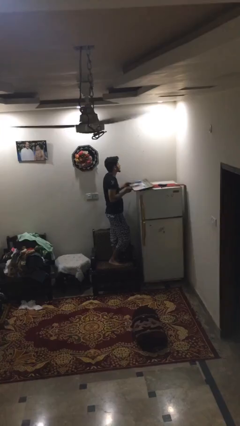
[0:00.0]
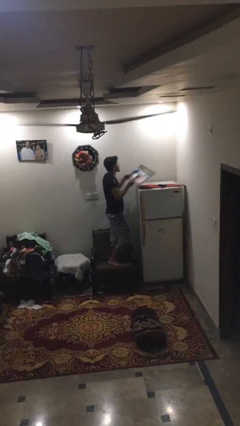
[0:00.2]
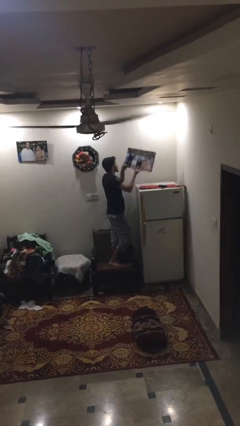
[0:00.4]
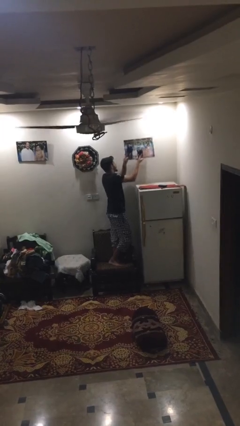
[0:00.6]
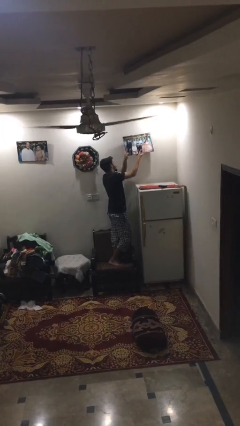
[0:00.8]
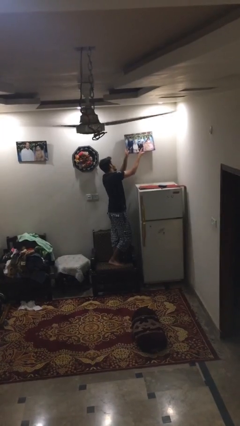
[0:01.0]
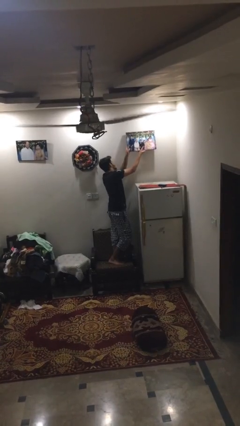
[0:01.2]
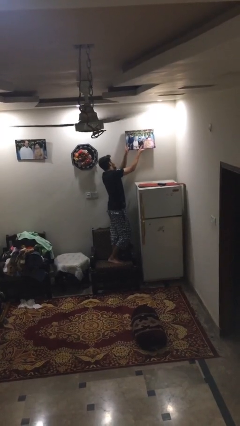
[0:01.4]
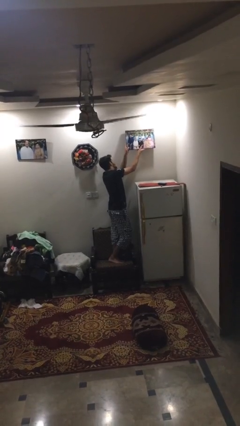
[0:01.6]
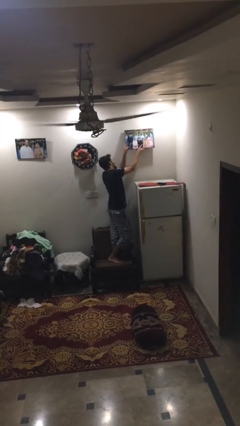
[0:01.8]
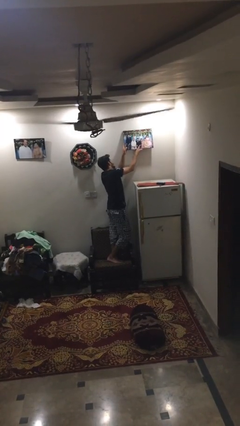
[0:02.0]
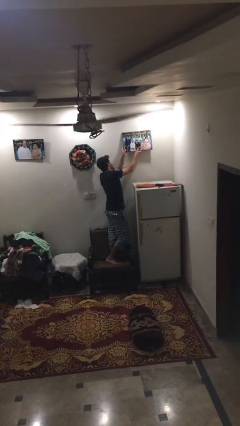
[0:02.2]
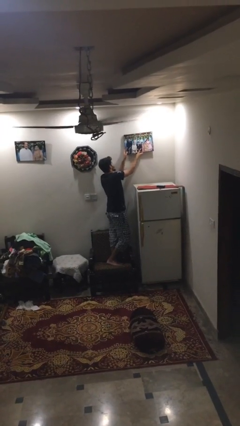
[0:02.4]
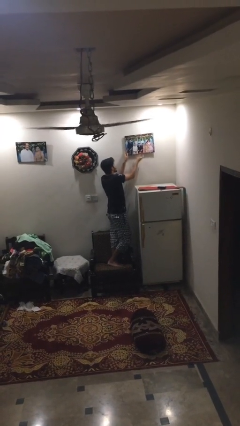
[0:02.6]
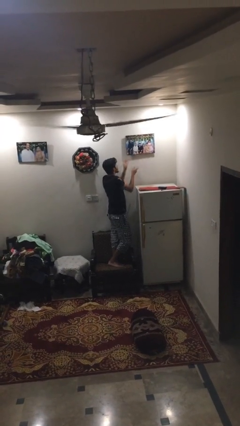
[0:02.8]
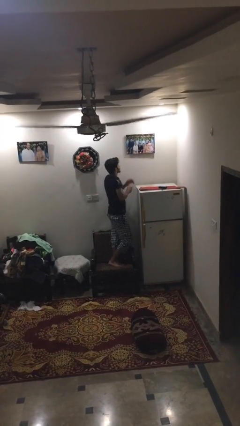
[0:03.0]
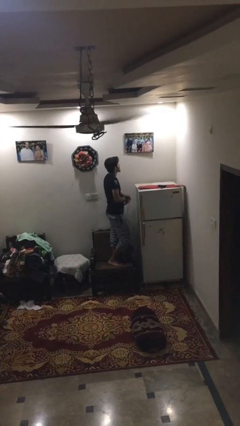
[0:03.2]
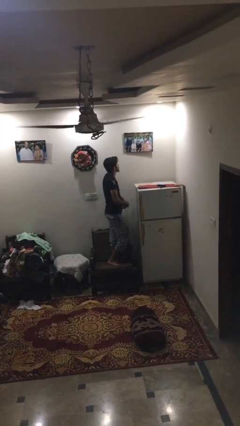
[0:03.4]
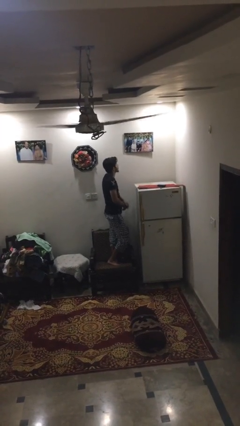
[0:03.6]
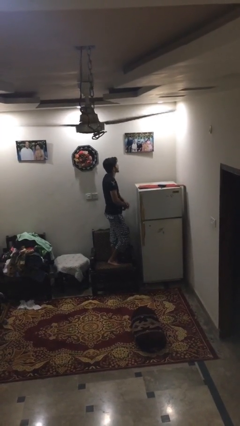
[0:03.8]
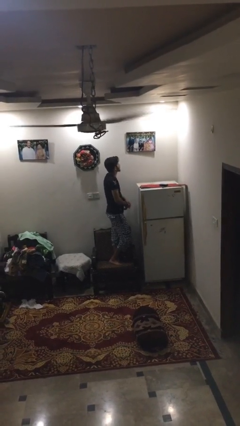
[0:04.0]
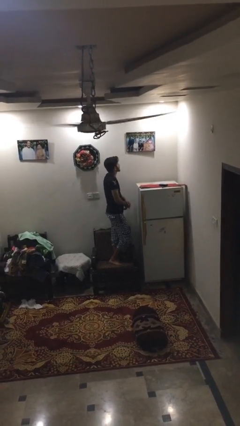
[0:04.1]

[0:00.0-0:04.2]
person puts up picture frame

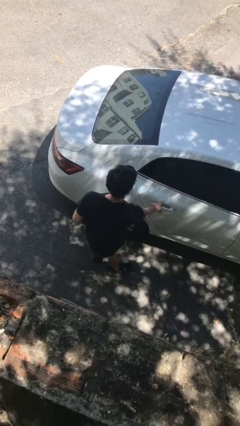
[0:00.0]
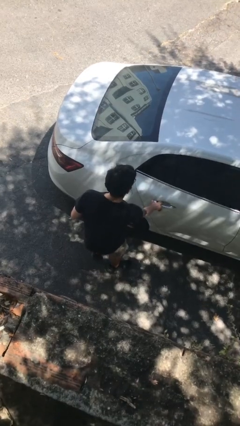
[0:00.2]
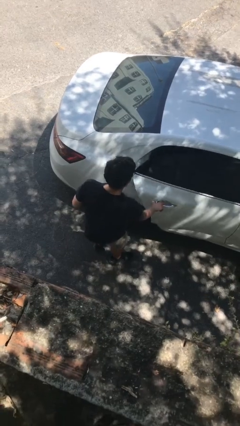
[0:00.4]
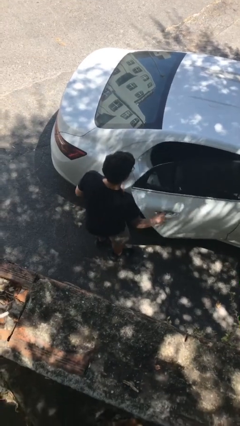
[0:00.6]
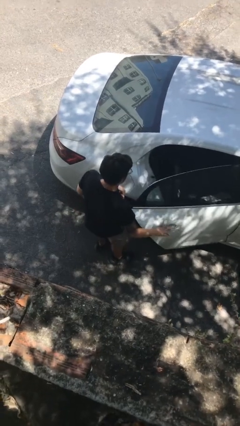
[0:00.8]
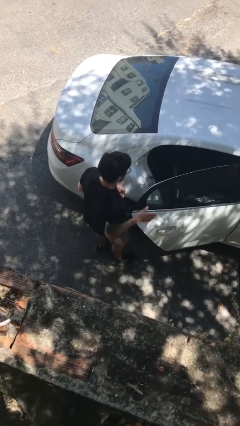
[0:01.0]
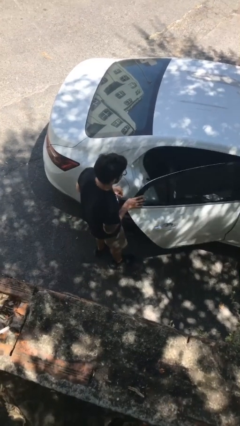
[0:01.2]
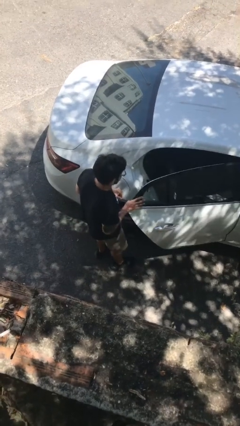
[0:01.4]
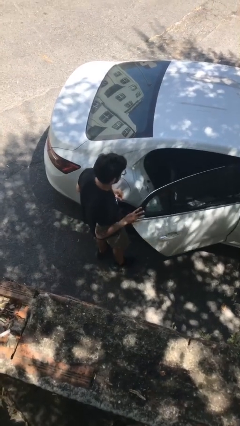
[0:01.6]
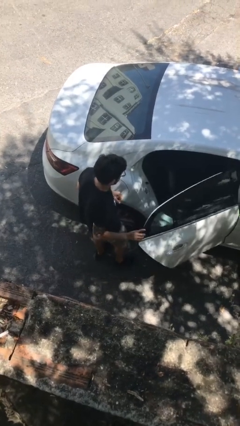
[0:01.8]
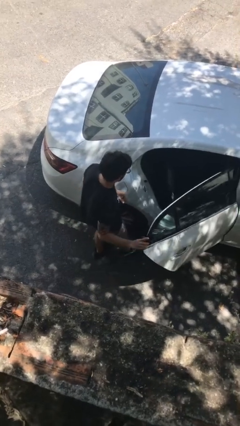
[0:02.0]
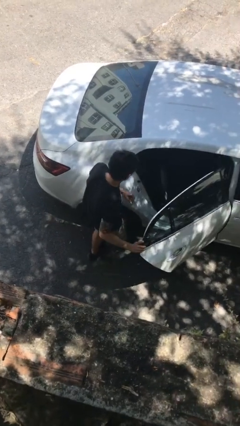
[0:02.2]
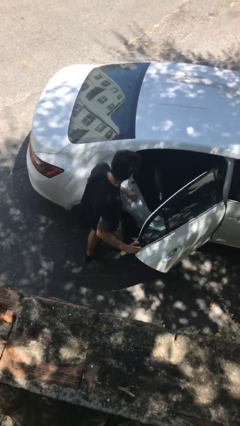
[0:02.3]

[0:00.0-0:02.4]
person opens car door

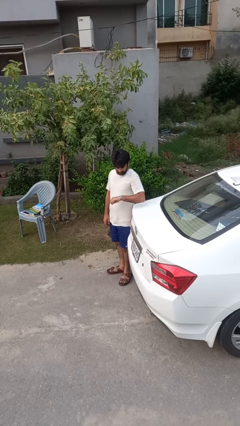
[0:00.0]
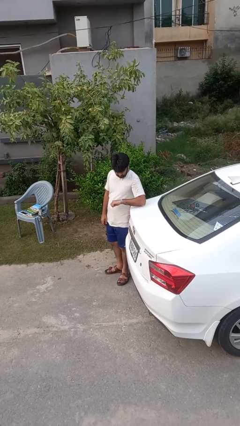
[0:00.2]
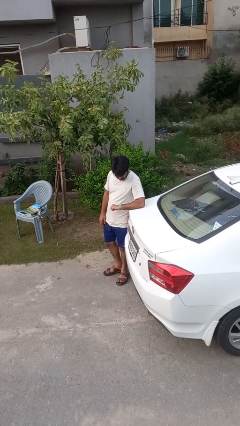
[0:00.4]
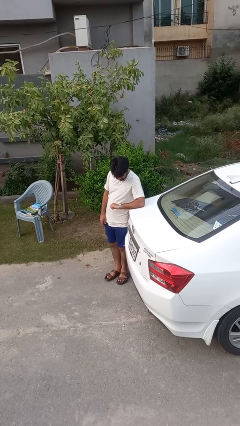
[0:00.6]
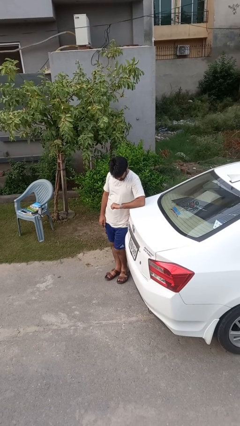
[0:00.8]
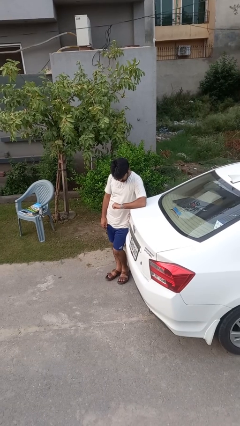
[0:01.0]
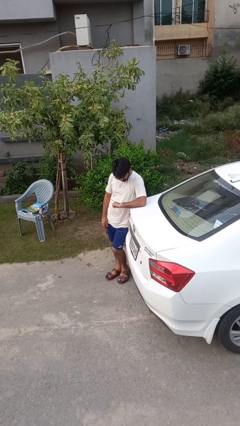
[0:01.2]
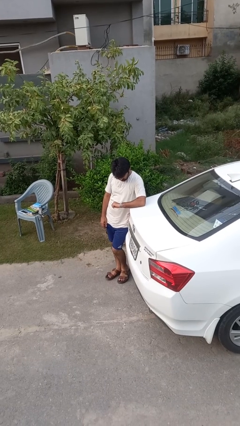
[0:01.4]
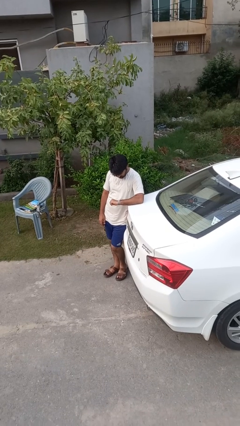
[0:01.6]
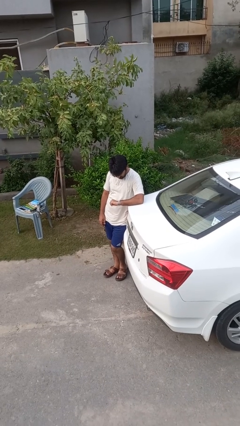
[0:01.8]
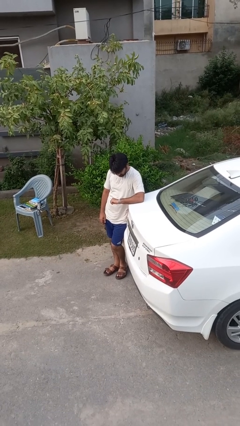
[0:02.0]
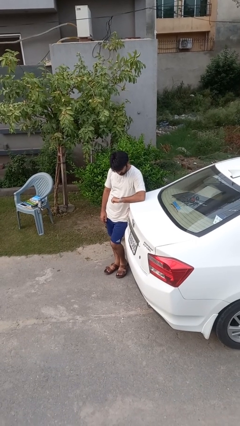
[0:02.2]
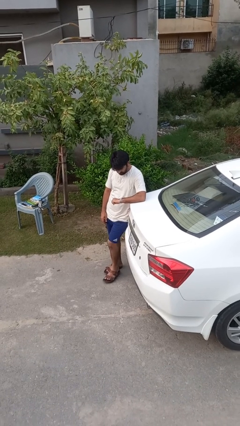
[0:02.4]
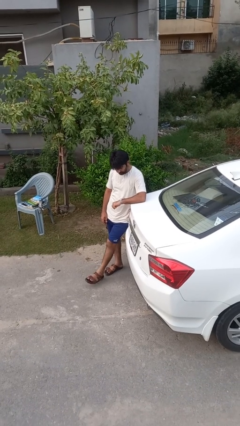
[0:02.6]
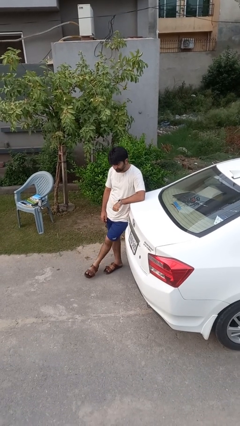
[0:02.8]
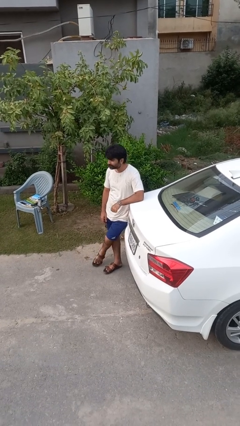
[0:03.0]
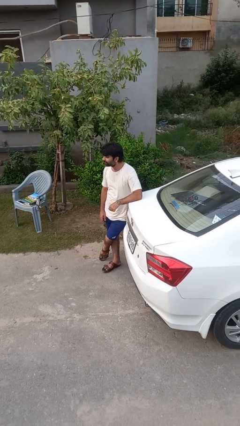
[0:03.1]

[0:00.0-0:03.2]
person looks at wristwatch

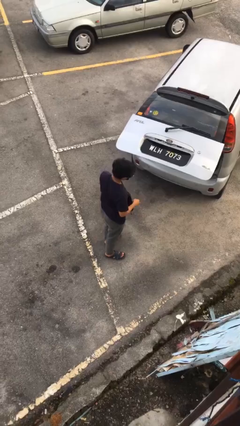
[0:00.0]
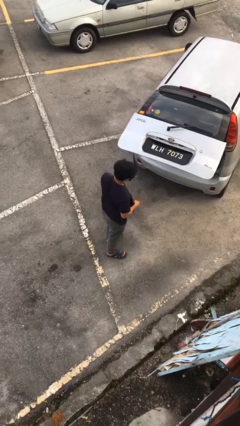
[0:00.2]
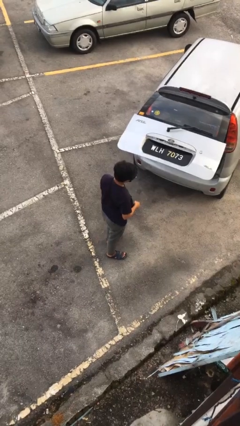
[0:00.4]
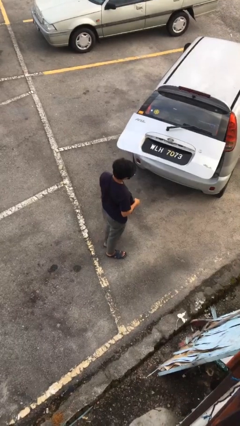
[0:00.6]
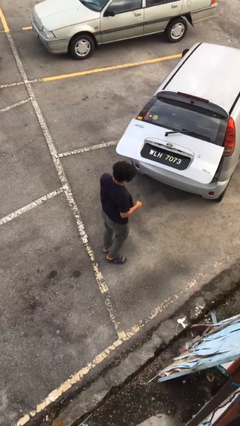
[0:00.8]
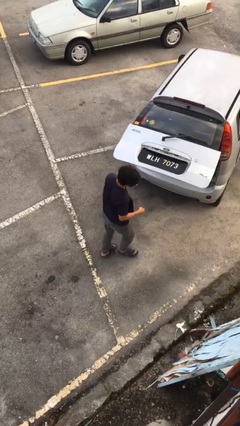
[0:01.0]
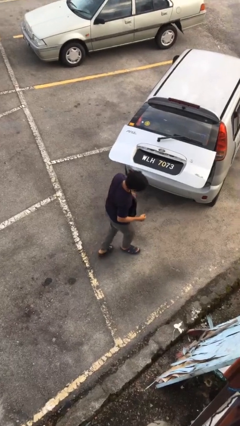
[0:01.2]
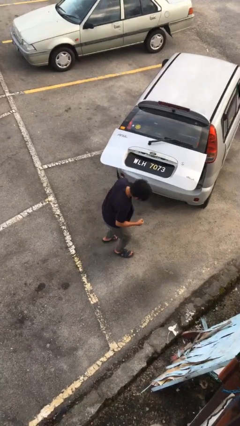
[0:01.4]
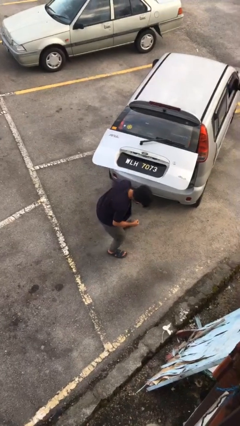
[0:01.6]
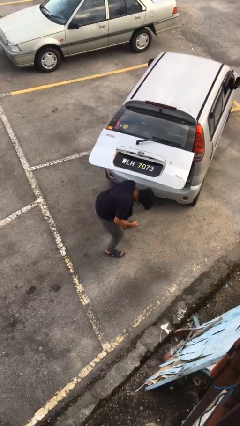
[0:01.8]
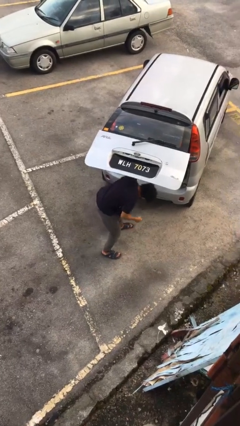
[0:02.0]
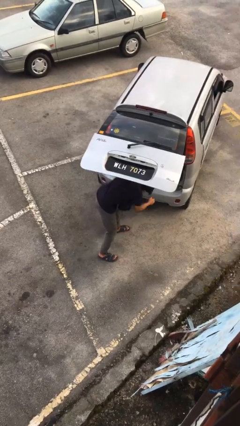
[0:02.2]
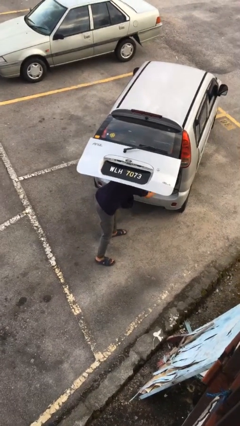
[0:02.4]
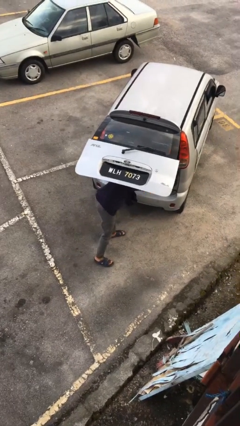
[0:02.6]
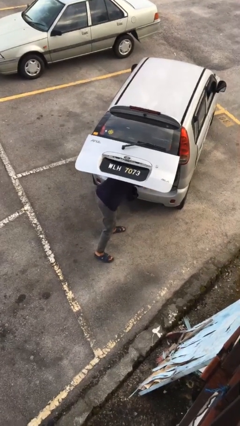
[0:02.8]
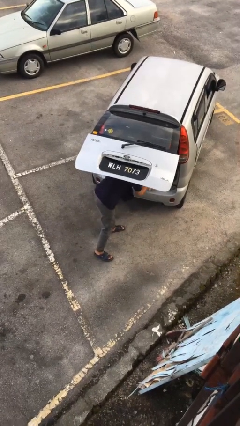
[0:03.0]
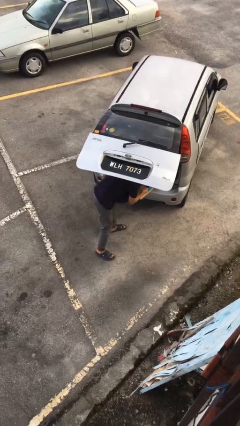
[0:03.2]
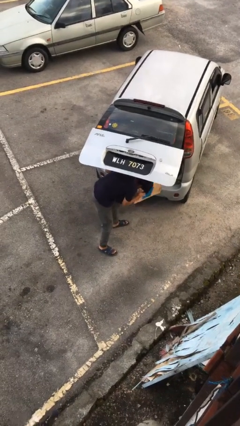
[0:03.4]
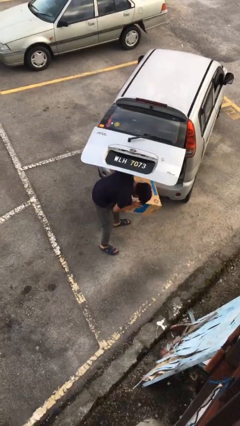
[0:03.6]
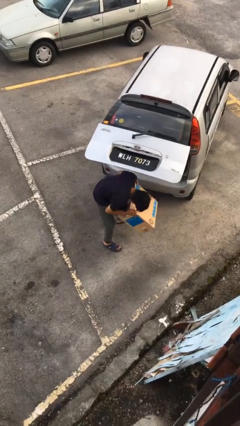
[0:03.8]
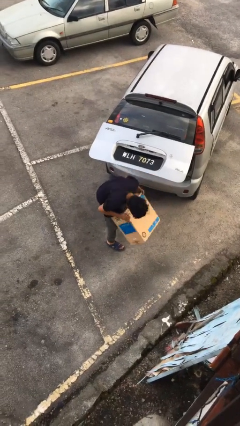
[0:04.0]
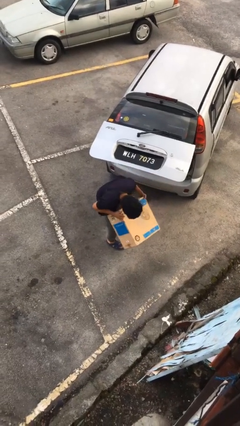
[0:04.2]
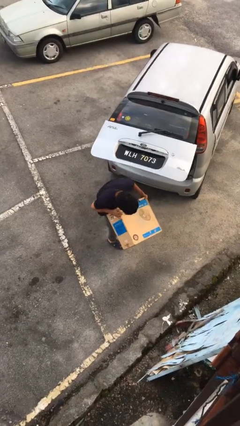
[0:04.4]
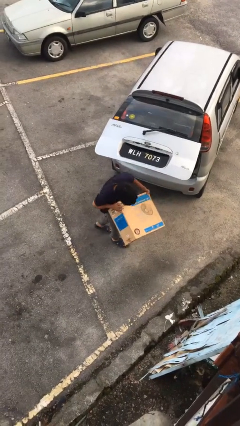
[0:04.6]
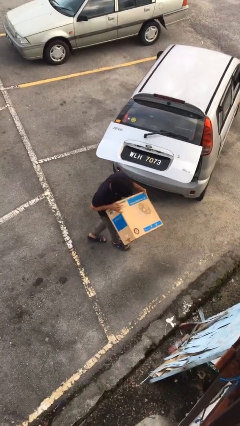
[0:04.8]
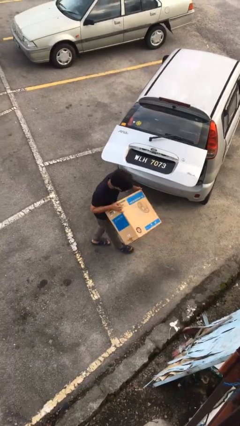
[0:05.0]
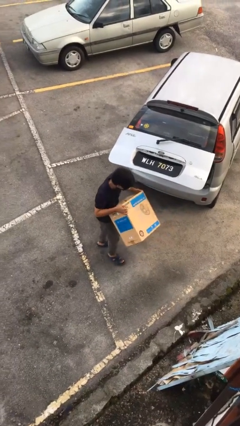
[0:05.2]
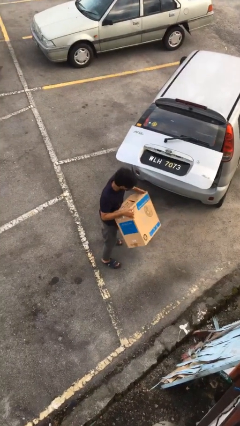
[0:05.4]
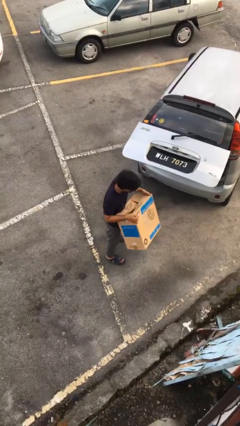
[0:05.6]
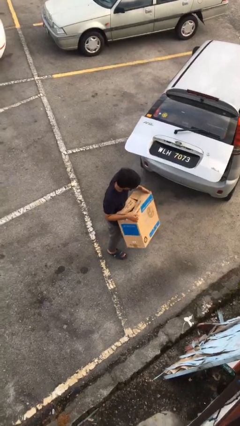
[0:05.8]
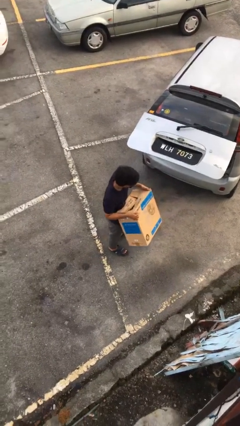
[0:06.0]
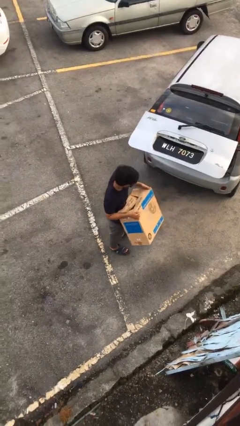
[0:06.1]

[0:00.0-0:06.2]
person unloads car

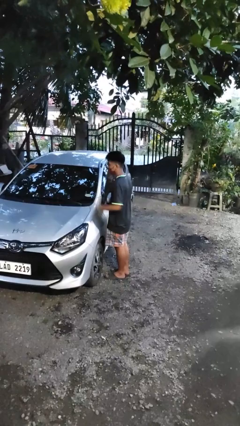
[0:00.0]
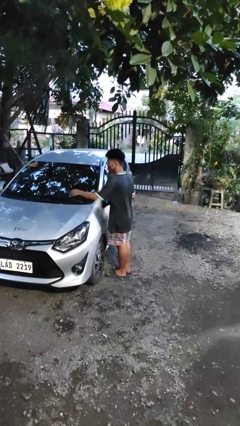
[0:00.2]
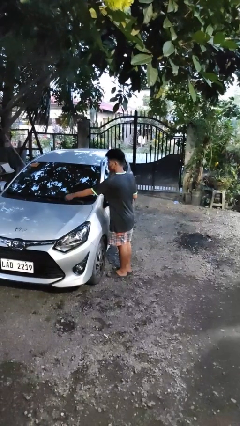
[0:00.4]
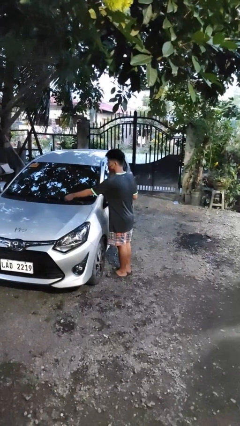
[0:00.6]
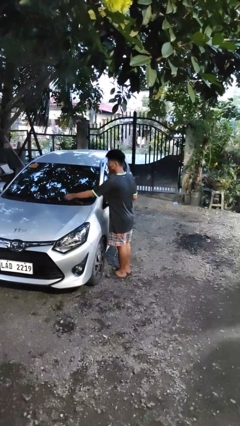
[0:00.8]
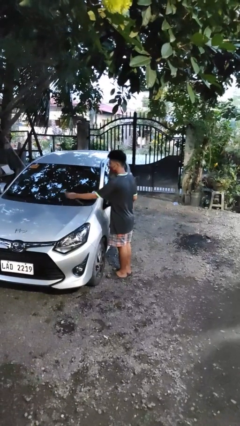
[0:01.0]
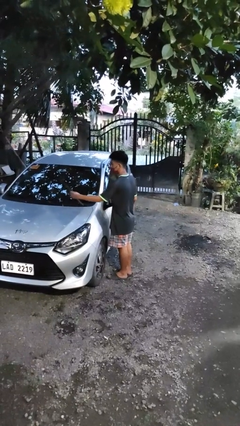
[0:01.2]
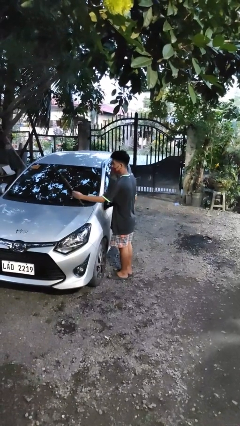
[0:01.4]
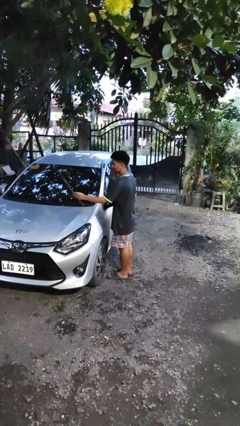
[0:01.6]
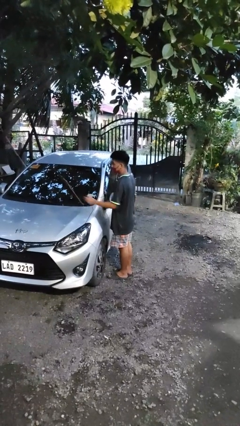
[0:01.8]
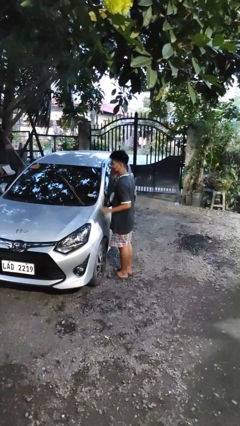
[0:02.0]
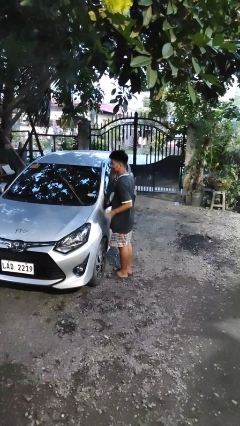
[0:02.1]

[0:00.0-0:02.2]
person flips up car wipers
